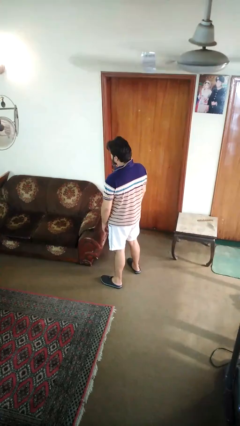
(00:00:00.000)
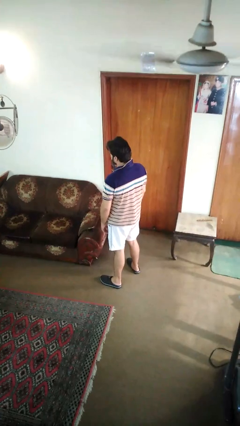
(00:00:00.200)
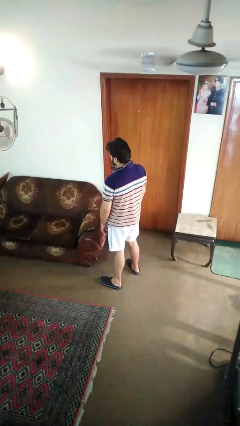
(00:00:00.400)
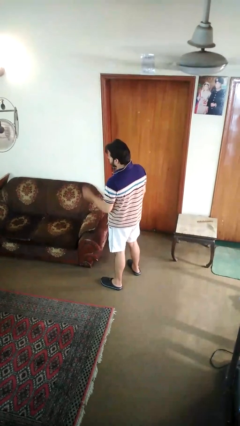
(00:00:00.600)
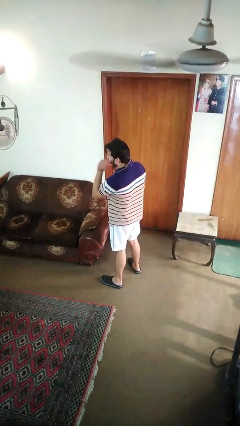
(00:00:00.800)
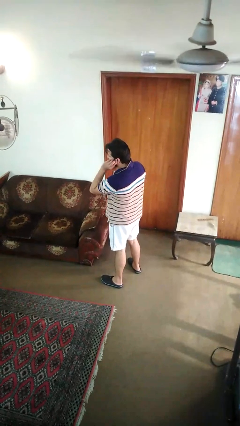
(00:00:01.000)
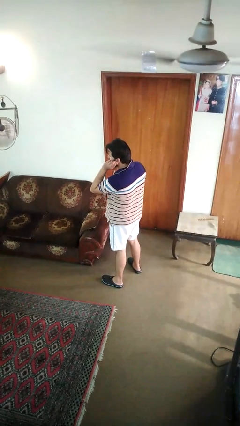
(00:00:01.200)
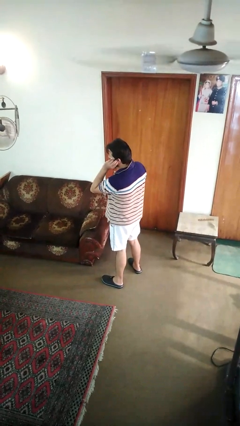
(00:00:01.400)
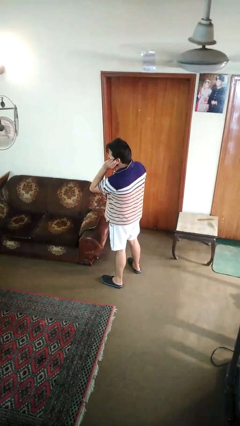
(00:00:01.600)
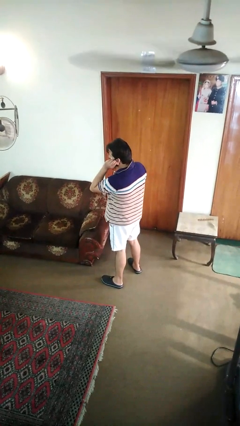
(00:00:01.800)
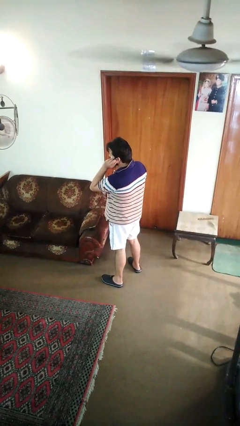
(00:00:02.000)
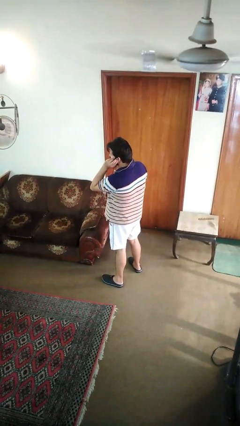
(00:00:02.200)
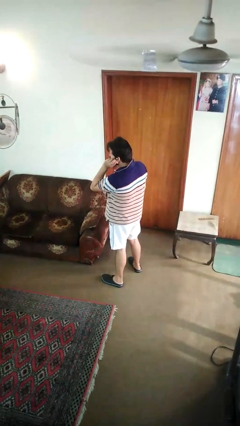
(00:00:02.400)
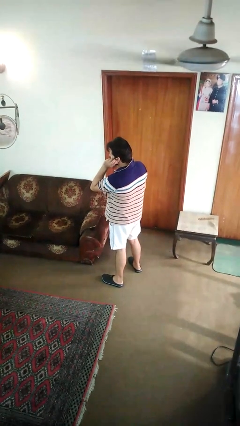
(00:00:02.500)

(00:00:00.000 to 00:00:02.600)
person touches earlobe

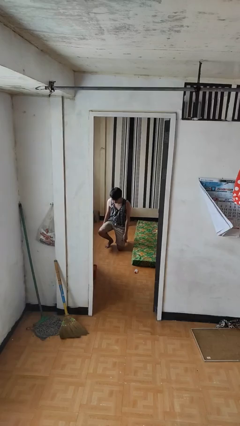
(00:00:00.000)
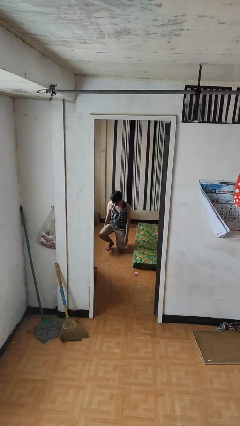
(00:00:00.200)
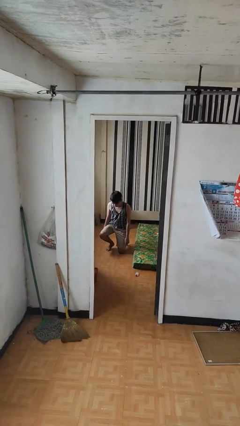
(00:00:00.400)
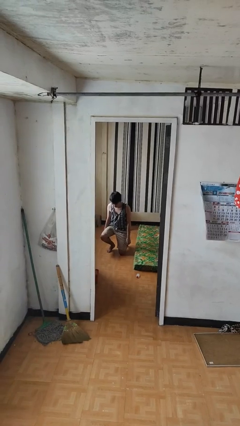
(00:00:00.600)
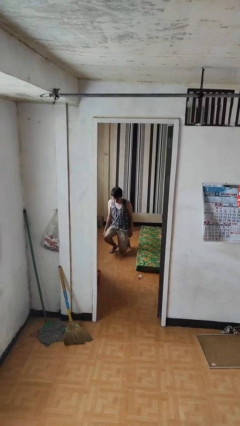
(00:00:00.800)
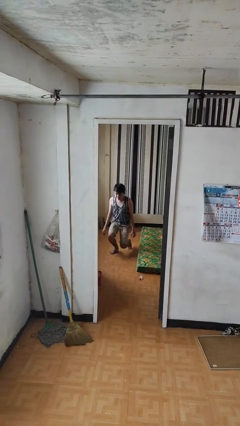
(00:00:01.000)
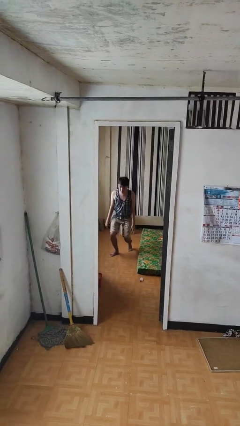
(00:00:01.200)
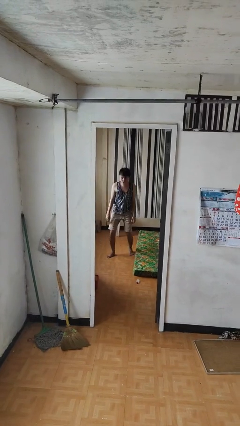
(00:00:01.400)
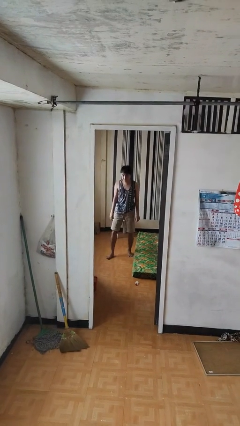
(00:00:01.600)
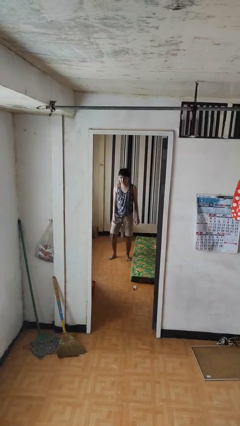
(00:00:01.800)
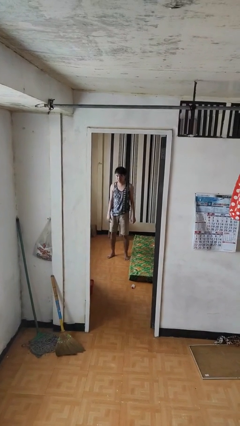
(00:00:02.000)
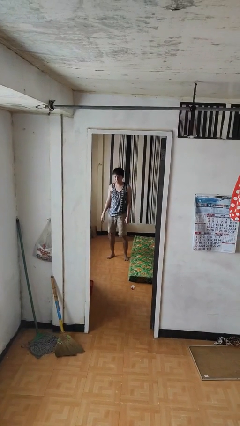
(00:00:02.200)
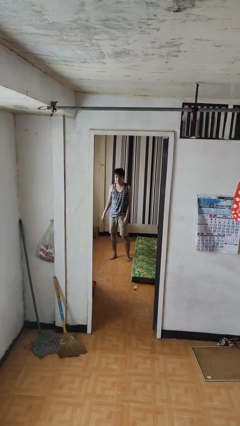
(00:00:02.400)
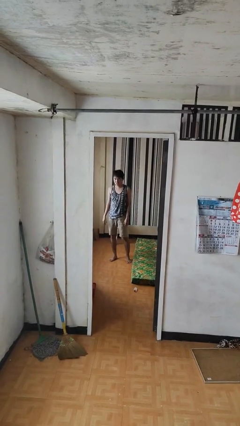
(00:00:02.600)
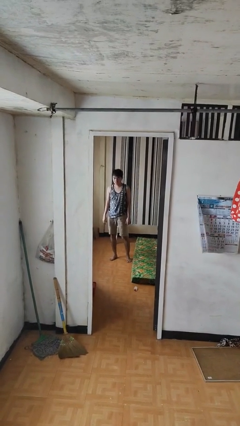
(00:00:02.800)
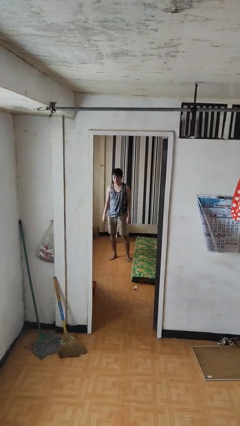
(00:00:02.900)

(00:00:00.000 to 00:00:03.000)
person stands up from floor

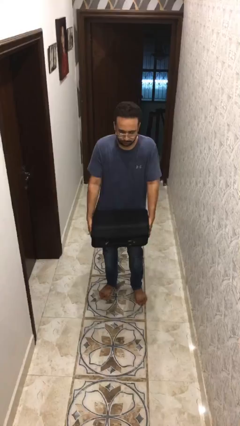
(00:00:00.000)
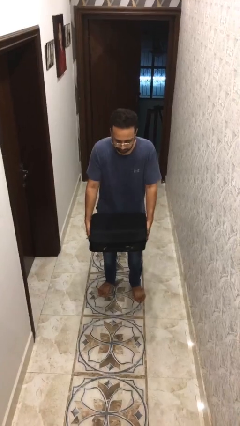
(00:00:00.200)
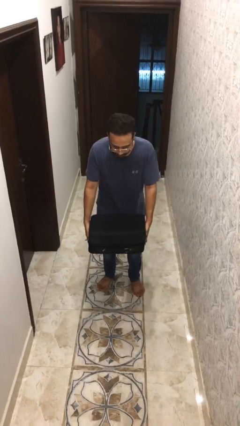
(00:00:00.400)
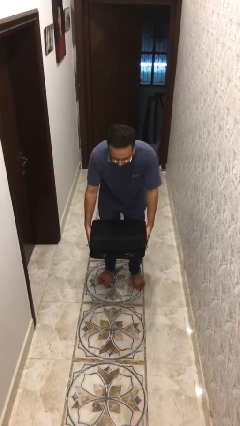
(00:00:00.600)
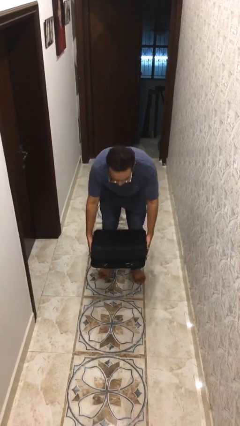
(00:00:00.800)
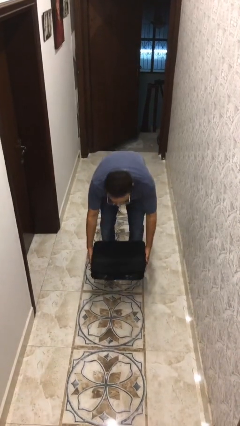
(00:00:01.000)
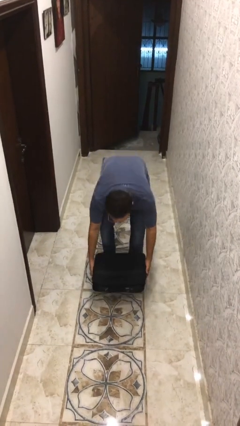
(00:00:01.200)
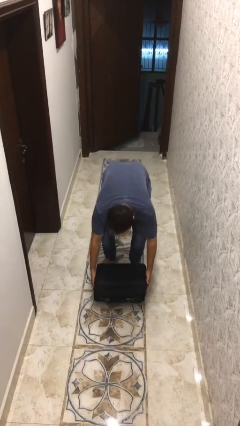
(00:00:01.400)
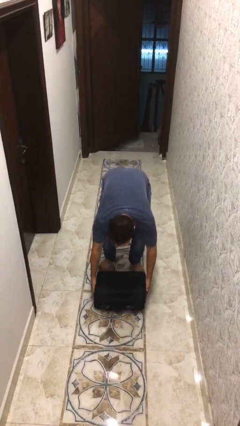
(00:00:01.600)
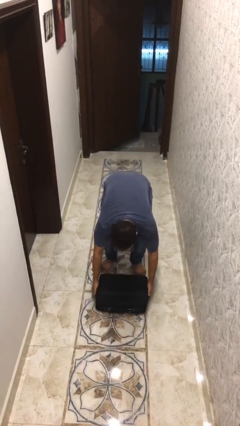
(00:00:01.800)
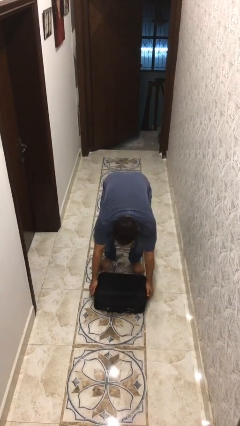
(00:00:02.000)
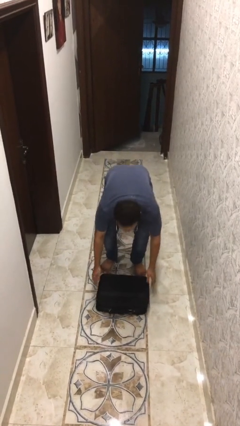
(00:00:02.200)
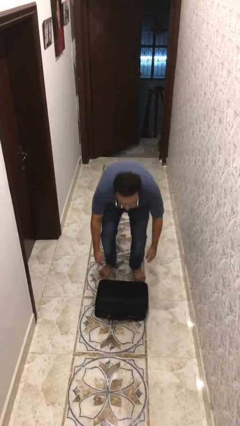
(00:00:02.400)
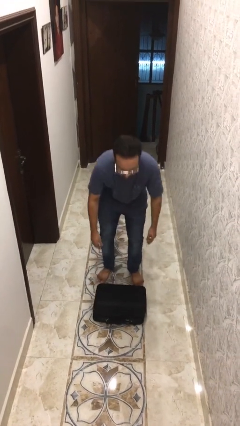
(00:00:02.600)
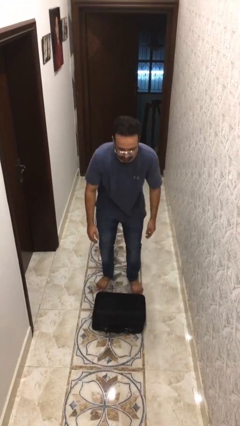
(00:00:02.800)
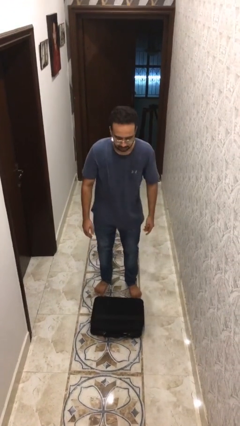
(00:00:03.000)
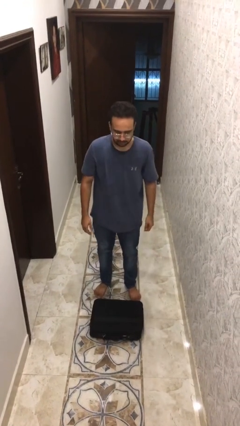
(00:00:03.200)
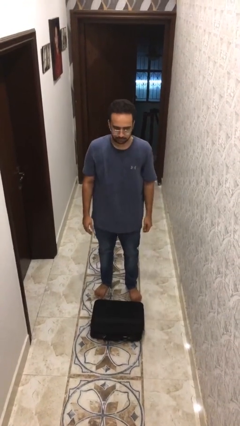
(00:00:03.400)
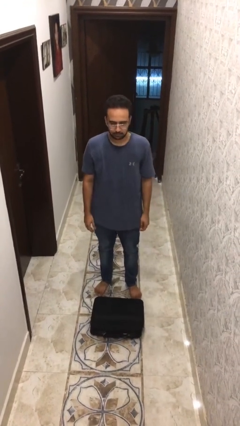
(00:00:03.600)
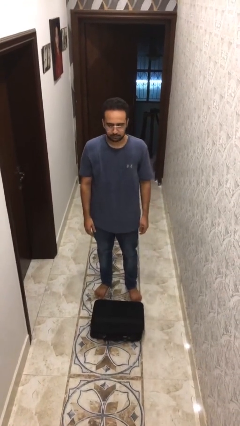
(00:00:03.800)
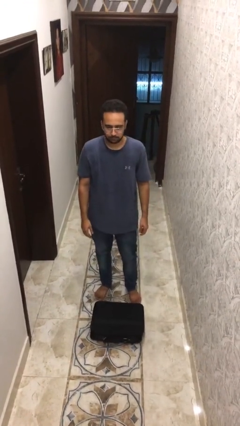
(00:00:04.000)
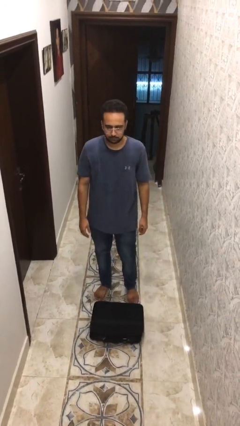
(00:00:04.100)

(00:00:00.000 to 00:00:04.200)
person puts down object on floor

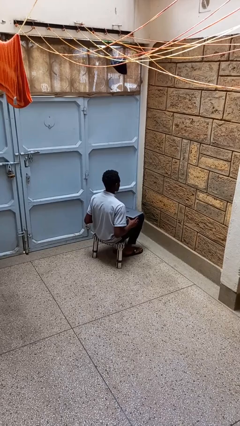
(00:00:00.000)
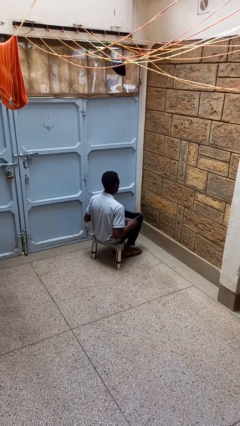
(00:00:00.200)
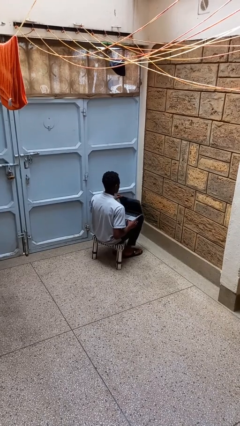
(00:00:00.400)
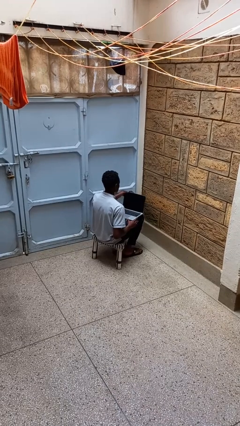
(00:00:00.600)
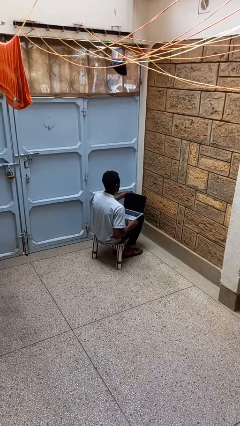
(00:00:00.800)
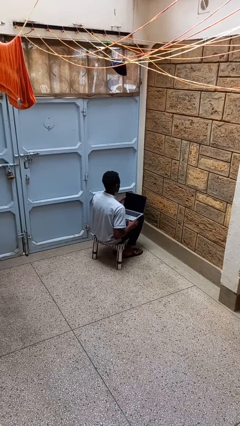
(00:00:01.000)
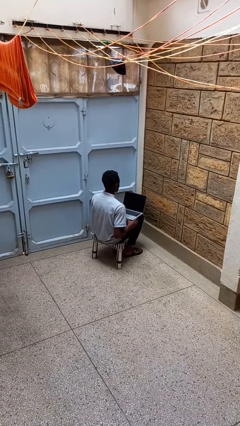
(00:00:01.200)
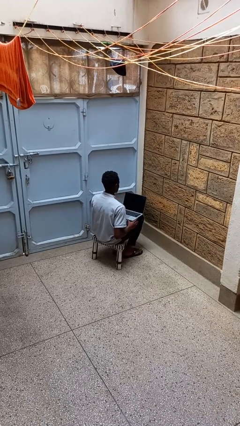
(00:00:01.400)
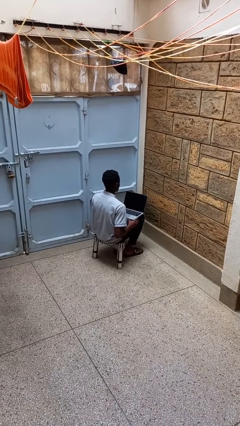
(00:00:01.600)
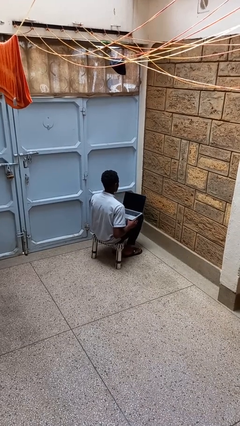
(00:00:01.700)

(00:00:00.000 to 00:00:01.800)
person opens laptop

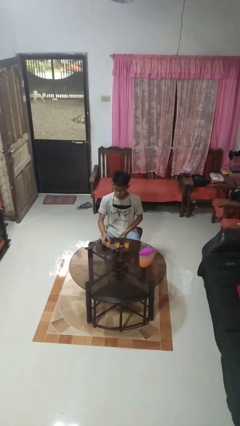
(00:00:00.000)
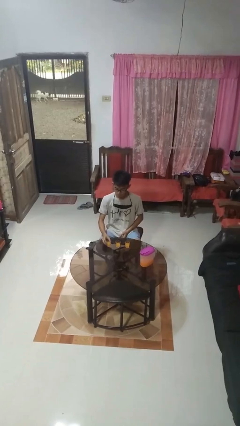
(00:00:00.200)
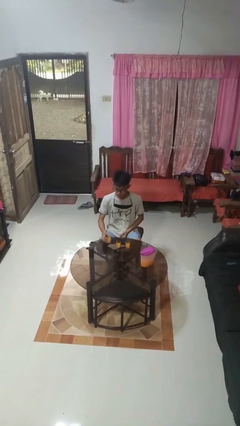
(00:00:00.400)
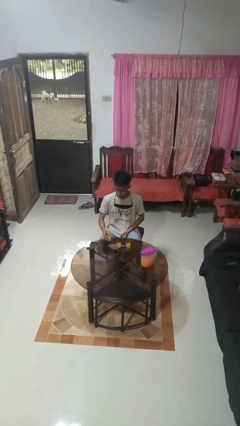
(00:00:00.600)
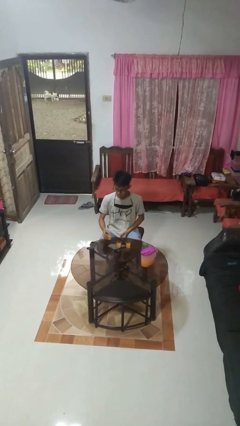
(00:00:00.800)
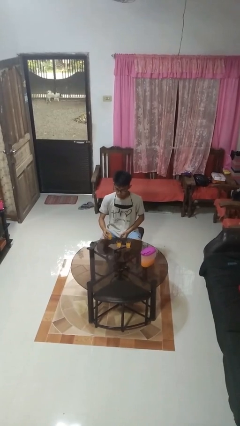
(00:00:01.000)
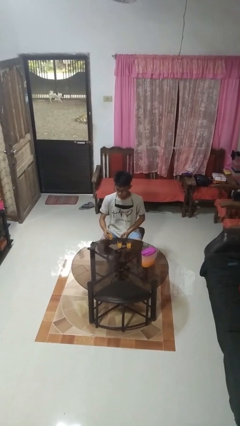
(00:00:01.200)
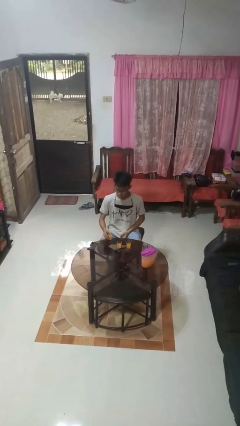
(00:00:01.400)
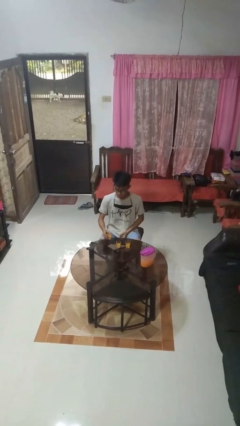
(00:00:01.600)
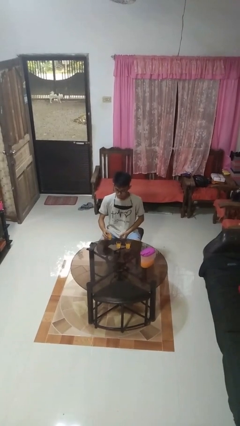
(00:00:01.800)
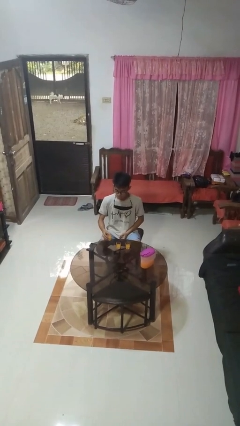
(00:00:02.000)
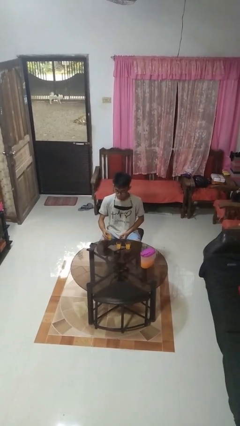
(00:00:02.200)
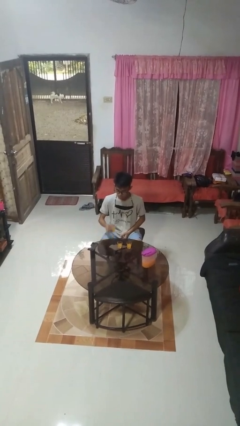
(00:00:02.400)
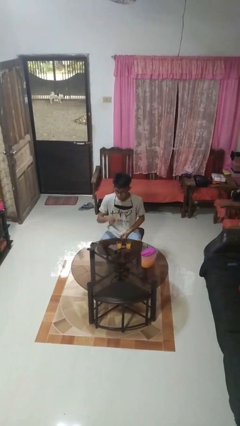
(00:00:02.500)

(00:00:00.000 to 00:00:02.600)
person picks up object from table

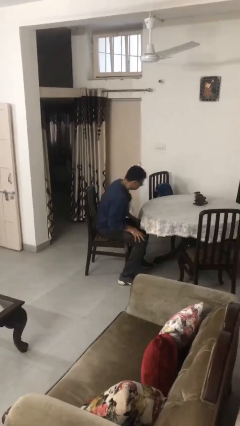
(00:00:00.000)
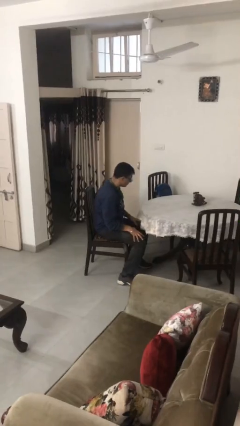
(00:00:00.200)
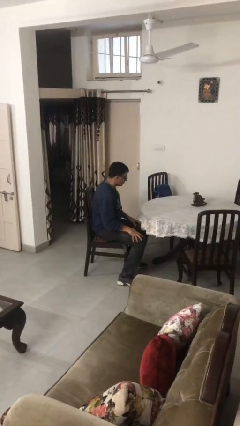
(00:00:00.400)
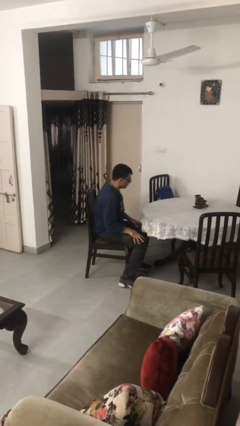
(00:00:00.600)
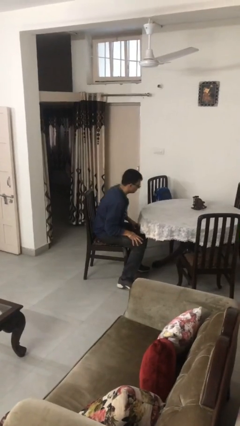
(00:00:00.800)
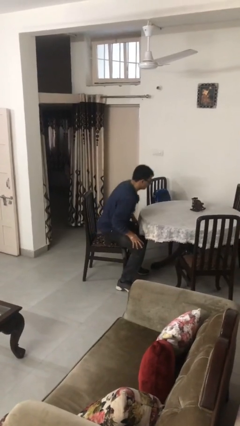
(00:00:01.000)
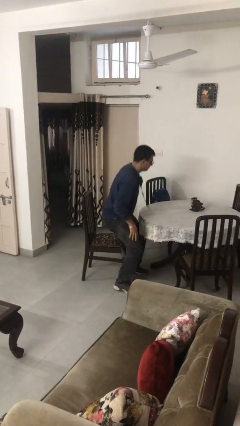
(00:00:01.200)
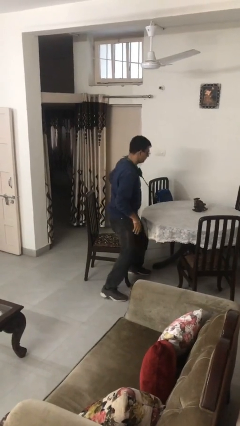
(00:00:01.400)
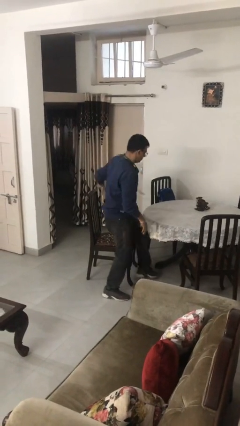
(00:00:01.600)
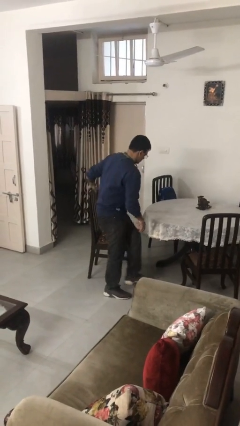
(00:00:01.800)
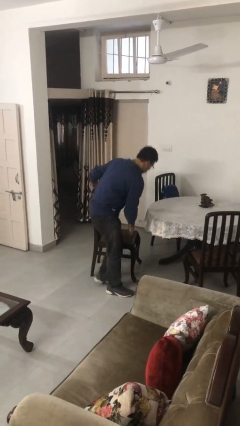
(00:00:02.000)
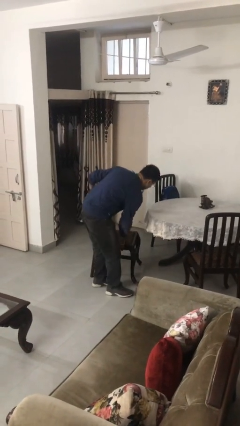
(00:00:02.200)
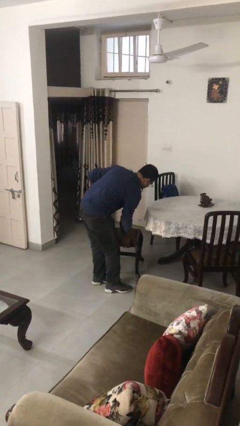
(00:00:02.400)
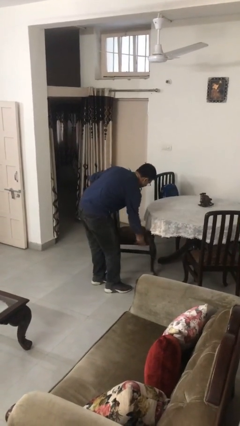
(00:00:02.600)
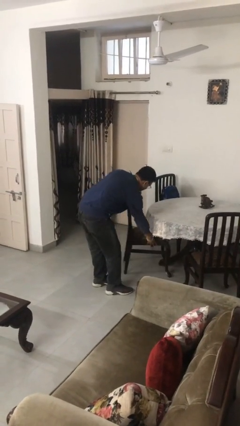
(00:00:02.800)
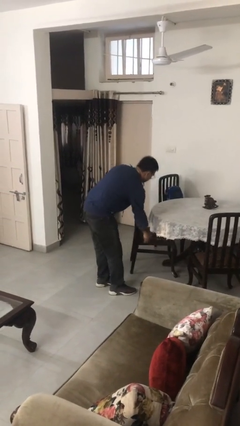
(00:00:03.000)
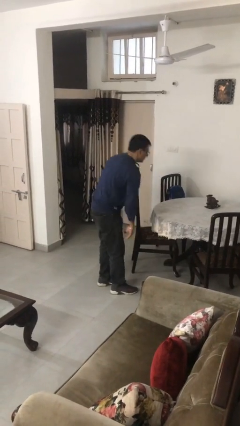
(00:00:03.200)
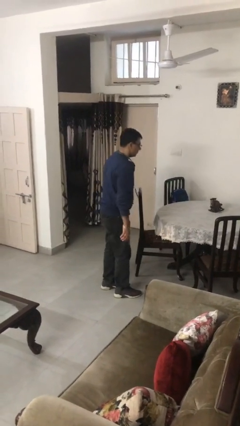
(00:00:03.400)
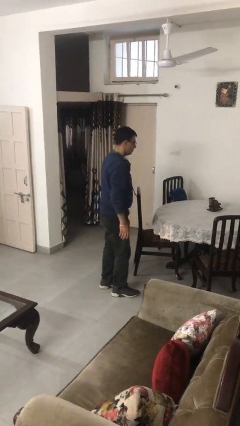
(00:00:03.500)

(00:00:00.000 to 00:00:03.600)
person stands up
